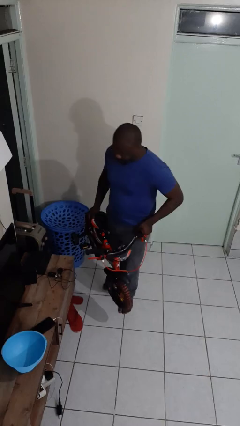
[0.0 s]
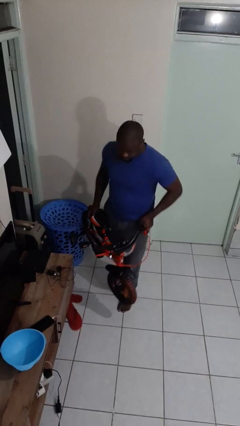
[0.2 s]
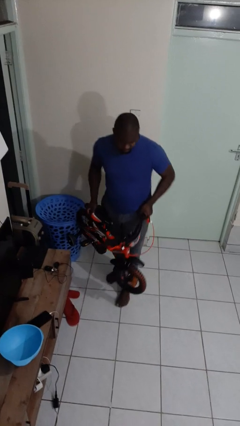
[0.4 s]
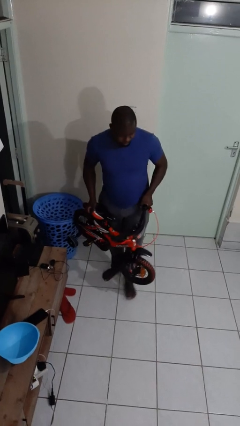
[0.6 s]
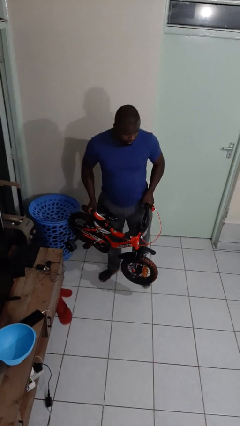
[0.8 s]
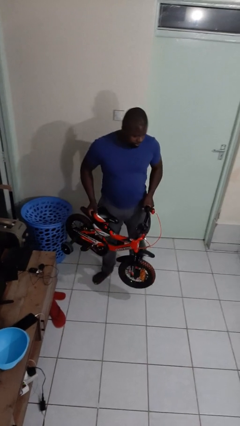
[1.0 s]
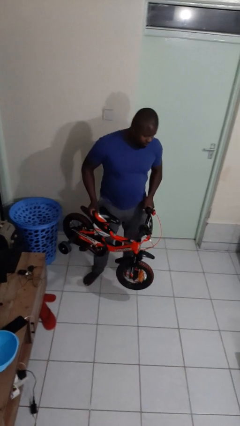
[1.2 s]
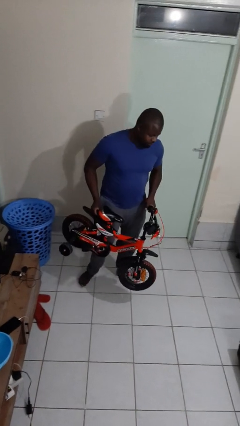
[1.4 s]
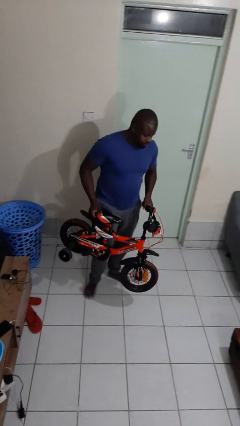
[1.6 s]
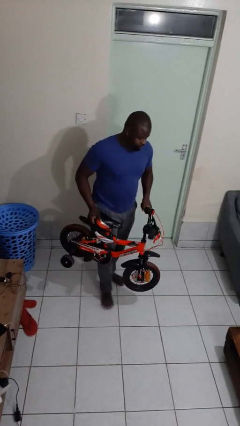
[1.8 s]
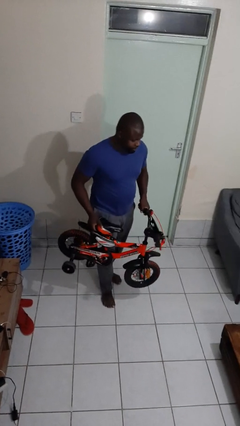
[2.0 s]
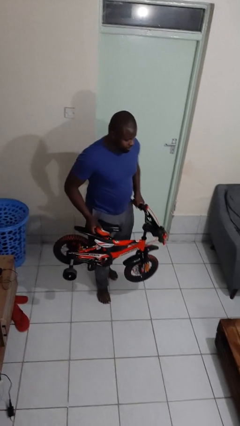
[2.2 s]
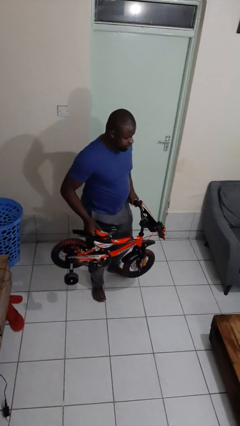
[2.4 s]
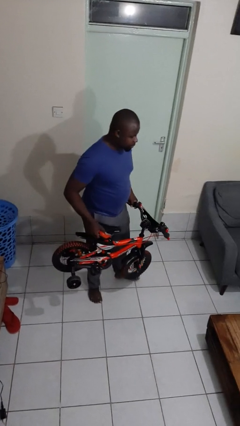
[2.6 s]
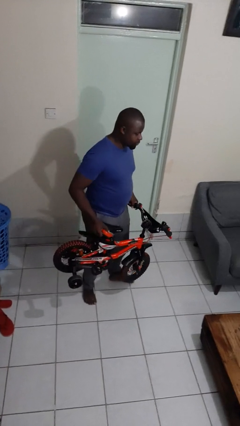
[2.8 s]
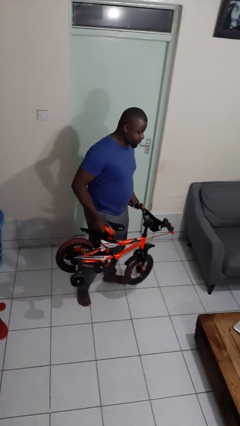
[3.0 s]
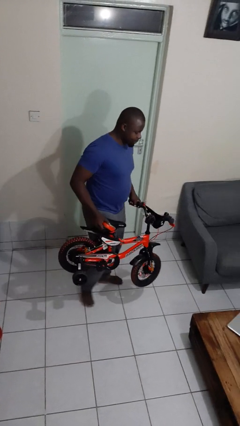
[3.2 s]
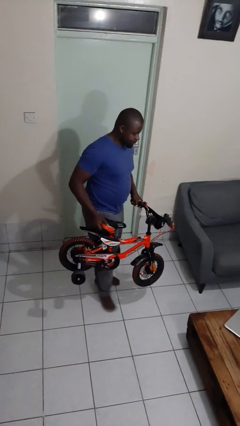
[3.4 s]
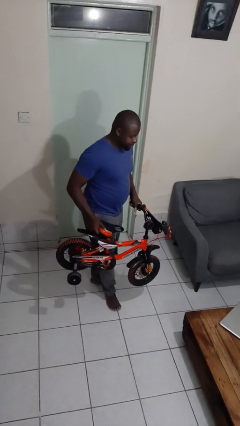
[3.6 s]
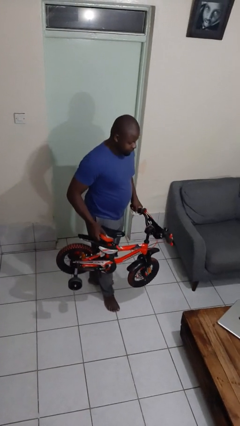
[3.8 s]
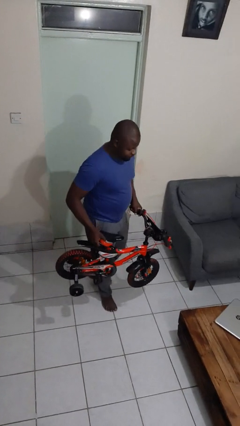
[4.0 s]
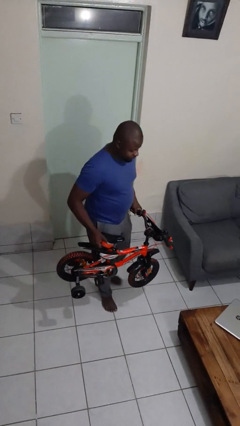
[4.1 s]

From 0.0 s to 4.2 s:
person carries bicycle

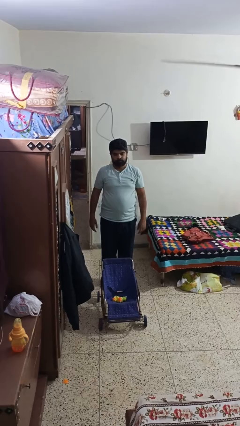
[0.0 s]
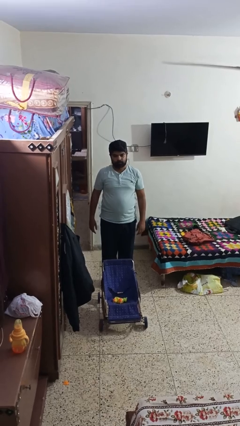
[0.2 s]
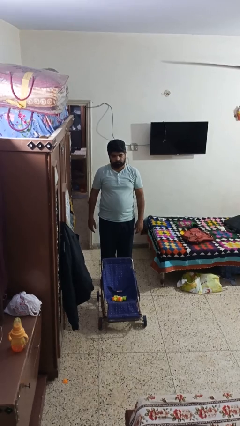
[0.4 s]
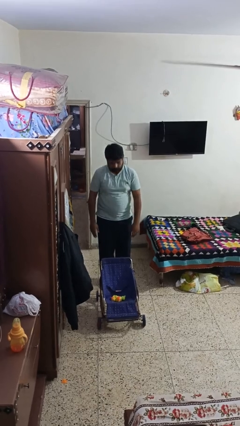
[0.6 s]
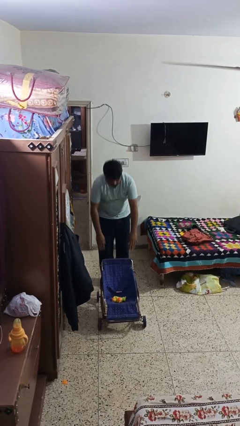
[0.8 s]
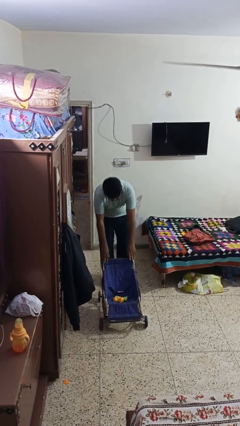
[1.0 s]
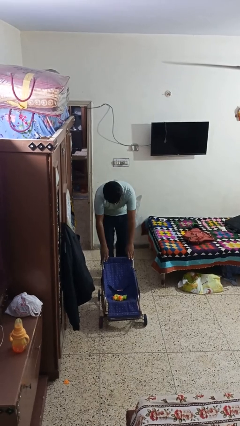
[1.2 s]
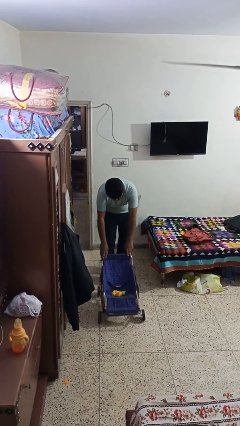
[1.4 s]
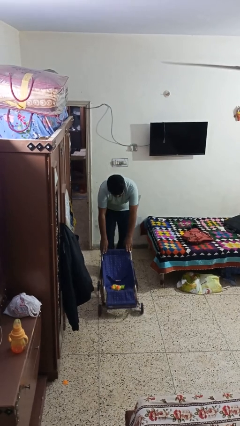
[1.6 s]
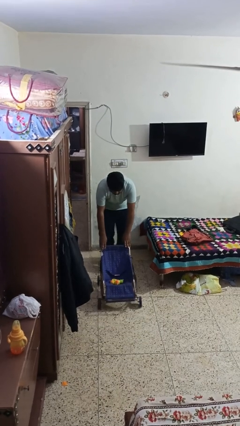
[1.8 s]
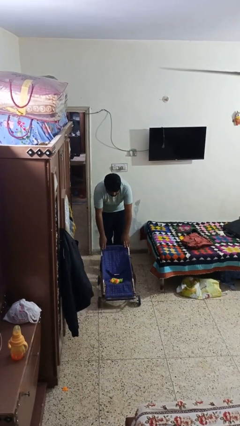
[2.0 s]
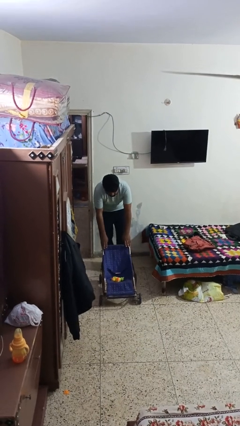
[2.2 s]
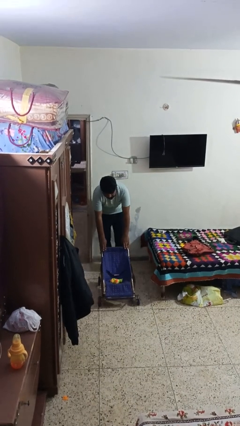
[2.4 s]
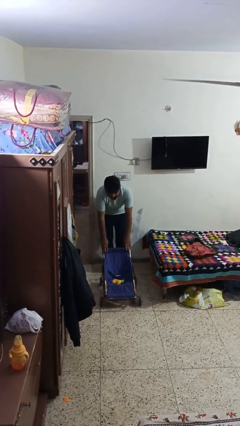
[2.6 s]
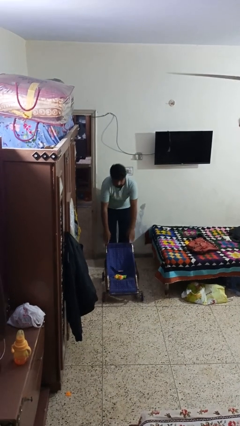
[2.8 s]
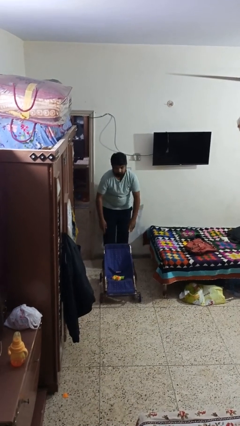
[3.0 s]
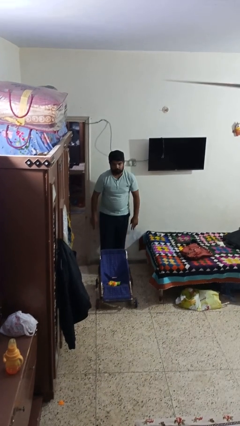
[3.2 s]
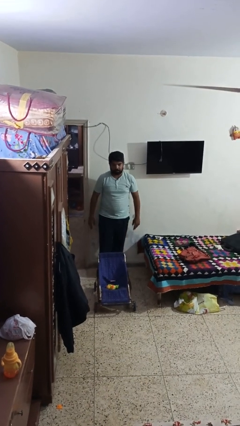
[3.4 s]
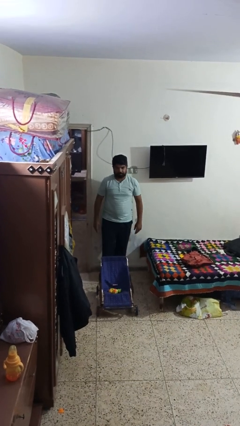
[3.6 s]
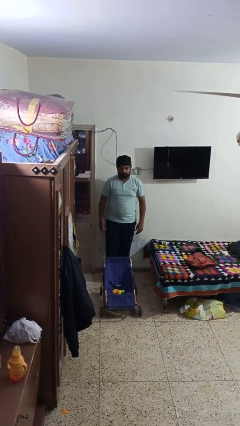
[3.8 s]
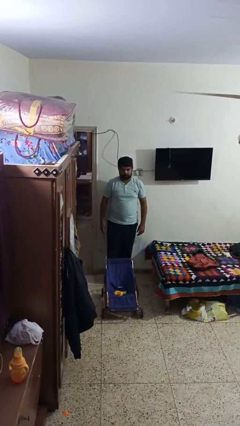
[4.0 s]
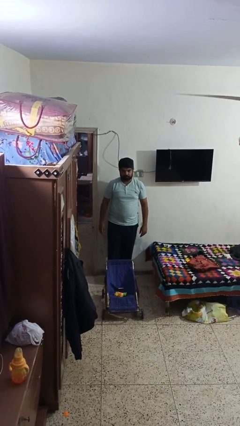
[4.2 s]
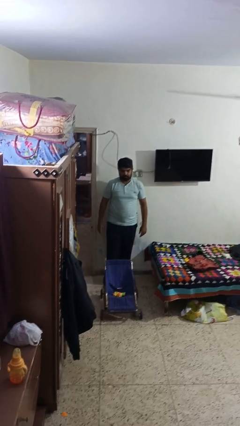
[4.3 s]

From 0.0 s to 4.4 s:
person pulls wheeled cart

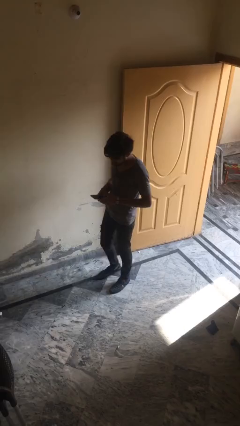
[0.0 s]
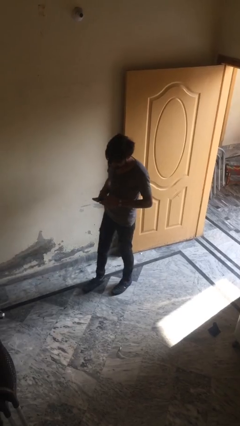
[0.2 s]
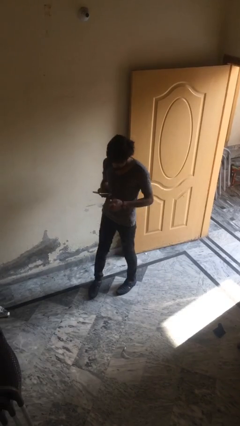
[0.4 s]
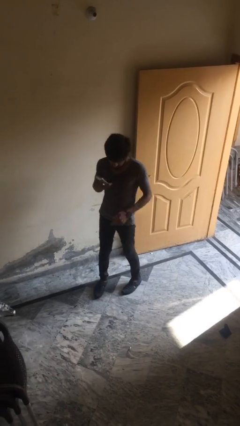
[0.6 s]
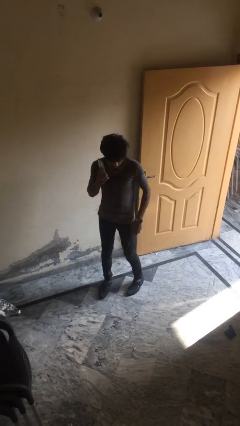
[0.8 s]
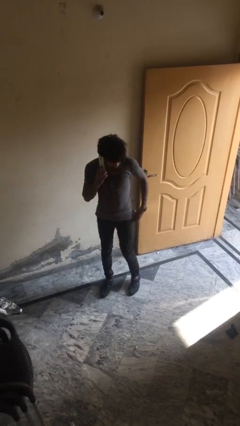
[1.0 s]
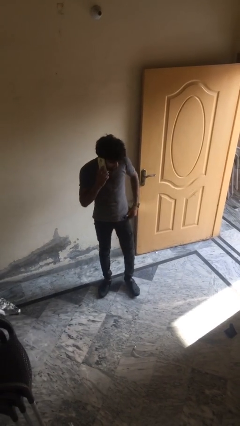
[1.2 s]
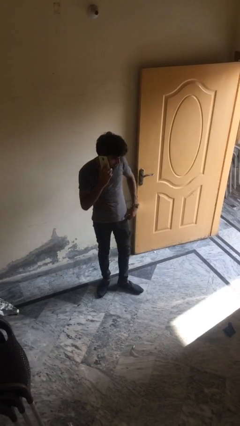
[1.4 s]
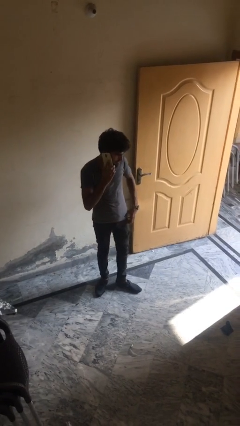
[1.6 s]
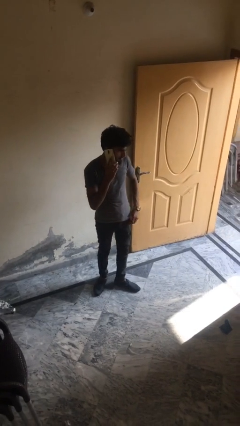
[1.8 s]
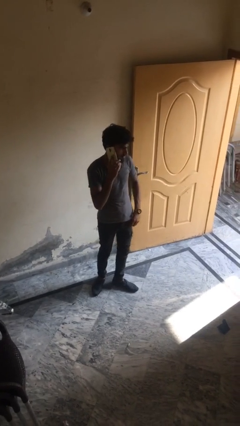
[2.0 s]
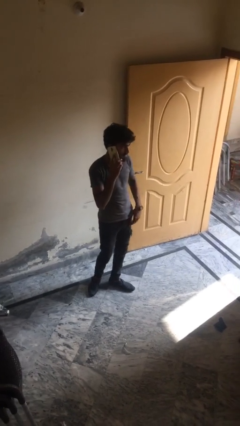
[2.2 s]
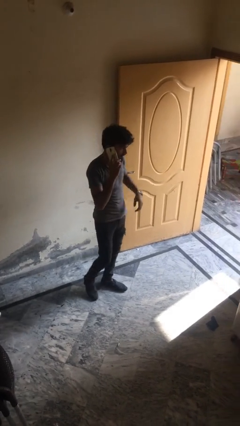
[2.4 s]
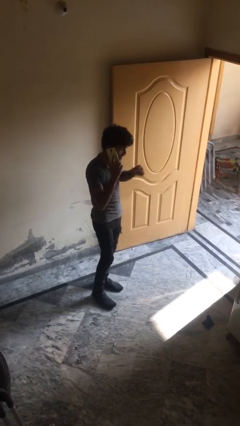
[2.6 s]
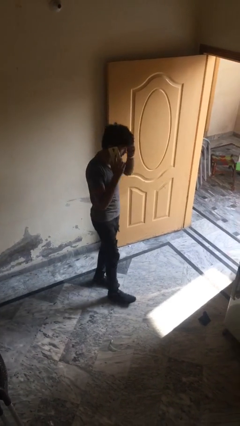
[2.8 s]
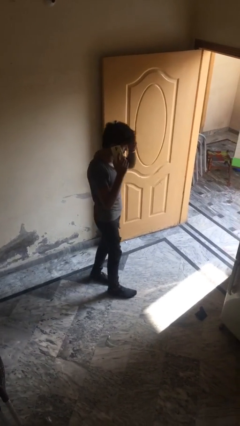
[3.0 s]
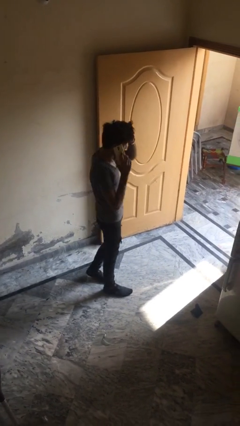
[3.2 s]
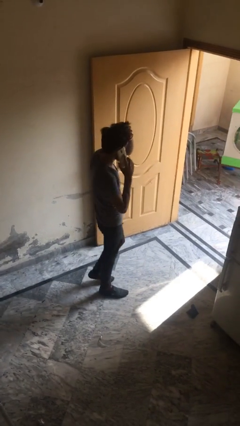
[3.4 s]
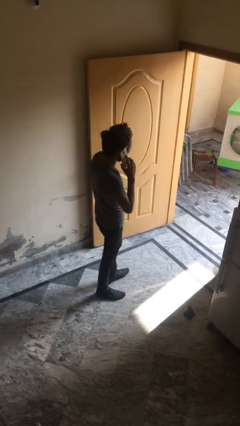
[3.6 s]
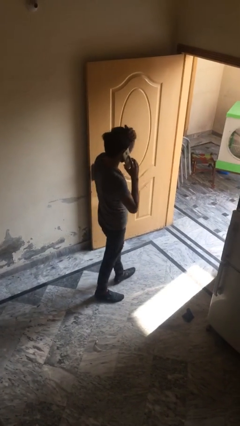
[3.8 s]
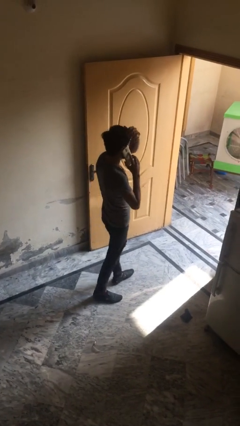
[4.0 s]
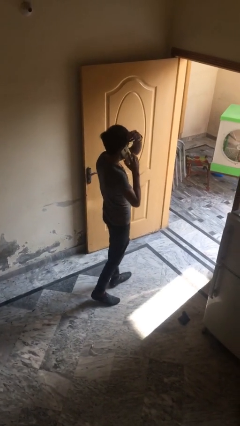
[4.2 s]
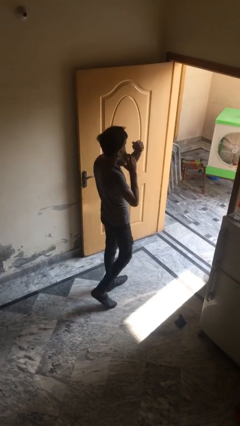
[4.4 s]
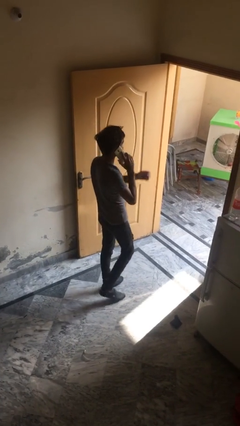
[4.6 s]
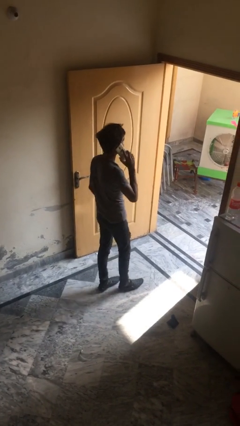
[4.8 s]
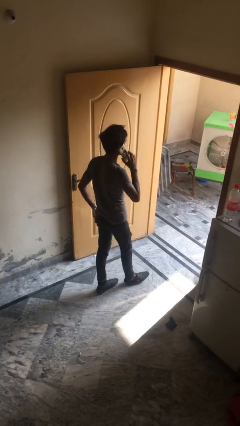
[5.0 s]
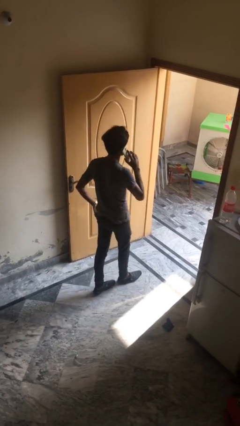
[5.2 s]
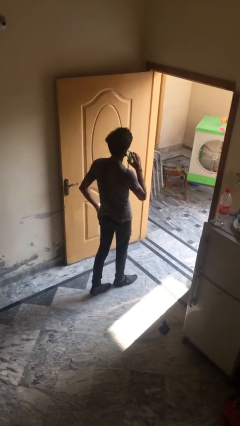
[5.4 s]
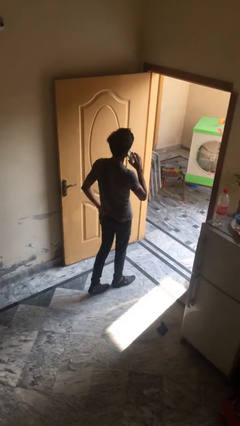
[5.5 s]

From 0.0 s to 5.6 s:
person talks on phone

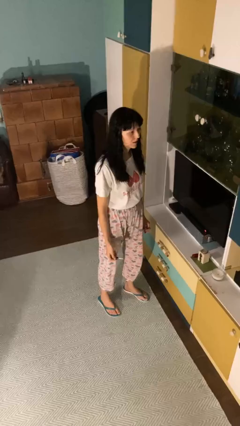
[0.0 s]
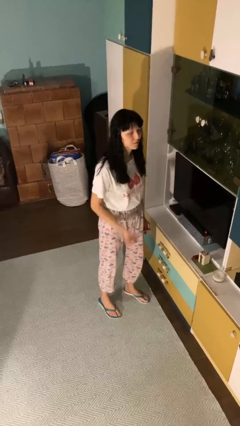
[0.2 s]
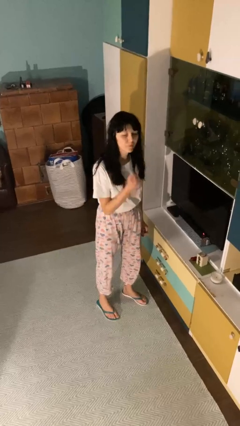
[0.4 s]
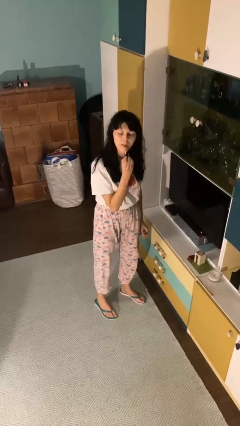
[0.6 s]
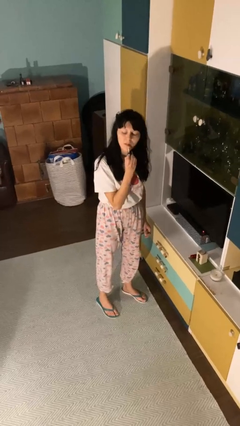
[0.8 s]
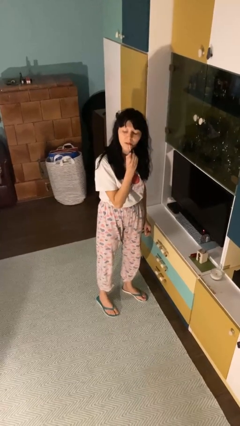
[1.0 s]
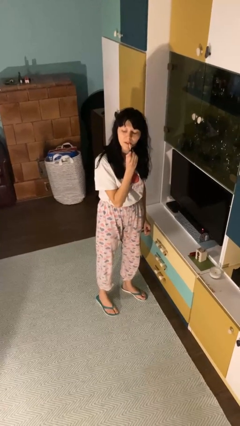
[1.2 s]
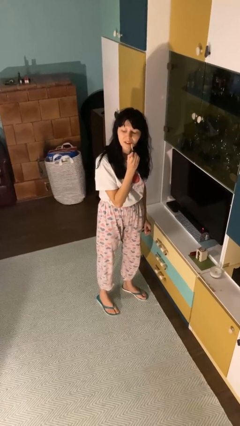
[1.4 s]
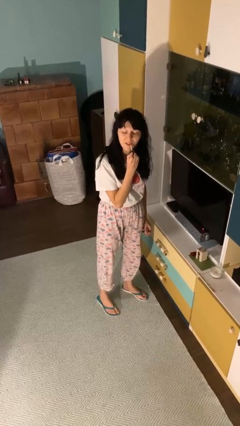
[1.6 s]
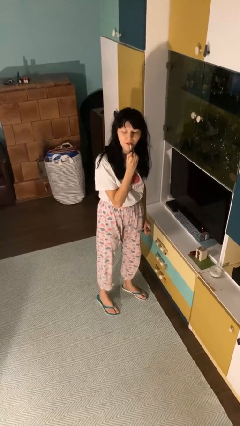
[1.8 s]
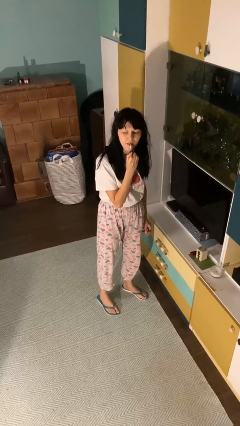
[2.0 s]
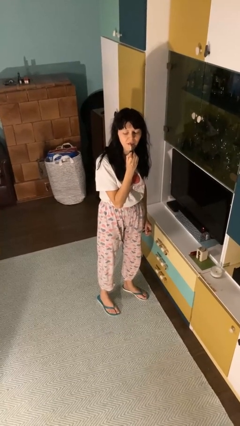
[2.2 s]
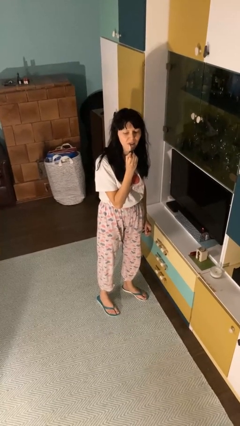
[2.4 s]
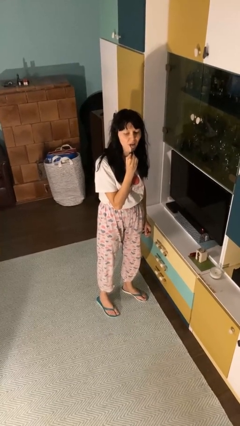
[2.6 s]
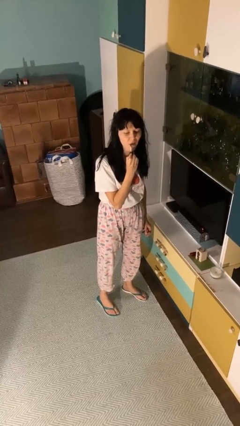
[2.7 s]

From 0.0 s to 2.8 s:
person applies lip makeup

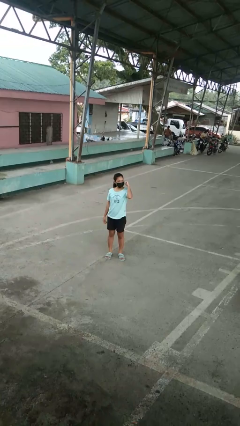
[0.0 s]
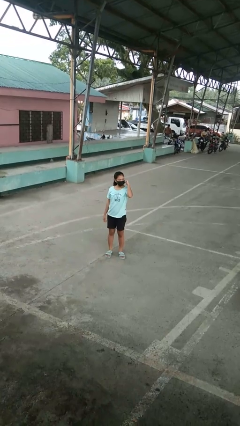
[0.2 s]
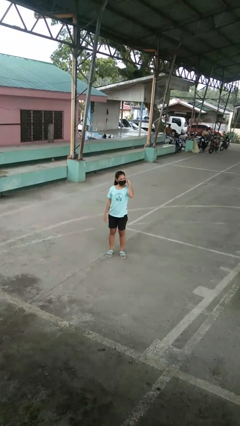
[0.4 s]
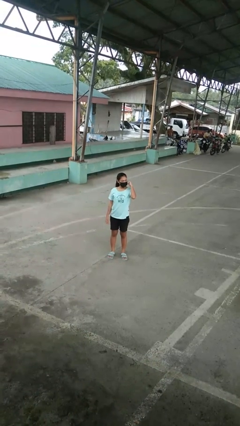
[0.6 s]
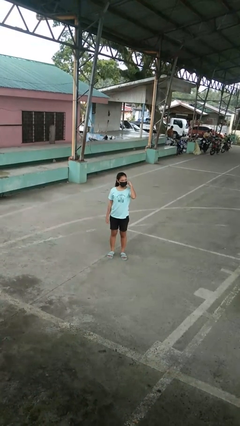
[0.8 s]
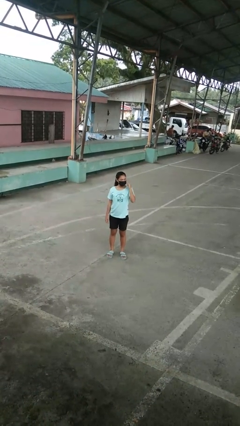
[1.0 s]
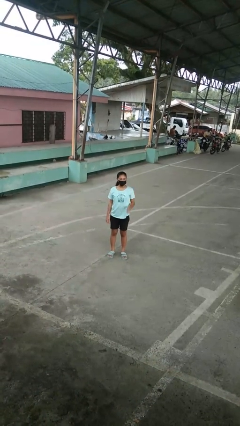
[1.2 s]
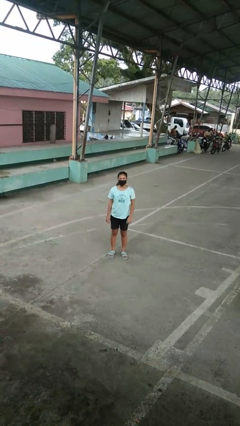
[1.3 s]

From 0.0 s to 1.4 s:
person gestures behind me
